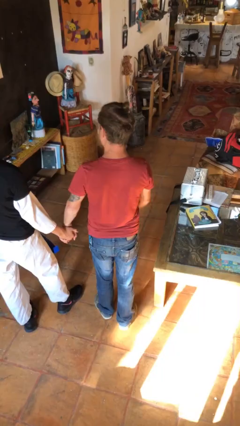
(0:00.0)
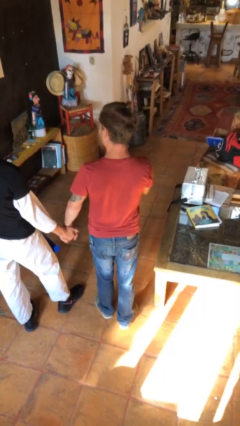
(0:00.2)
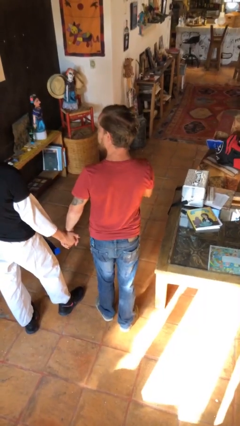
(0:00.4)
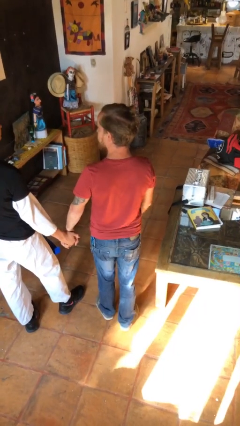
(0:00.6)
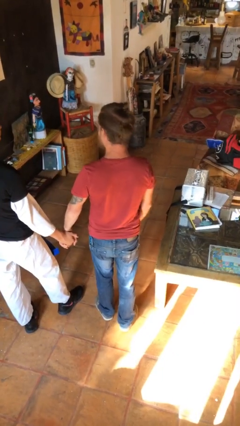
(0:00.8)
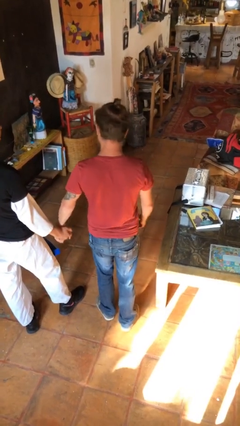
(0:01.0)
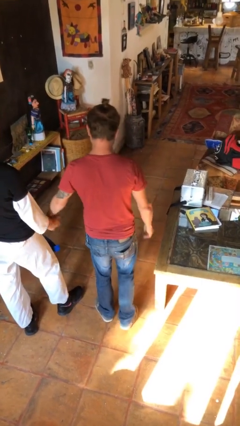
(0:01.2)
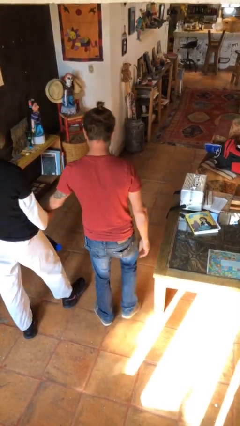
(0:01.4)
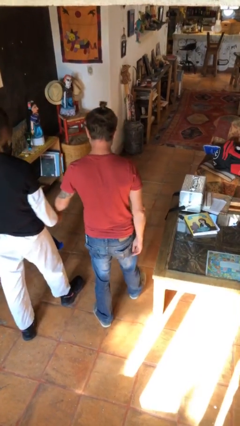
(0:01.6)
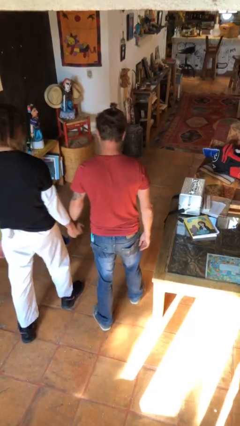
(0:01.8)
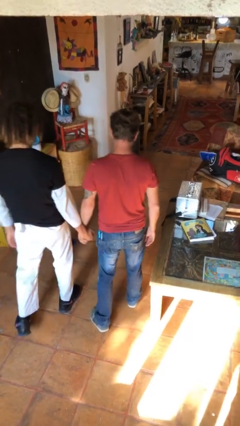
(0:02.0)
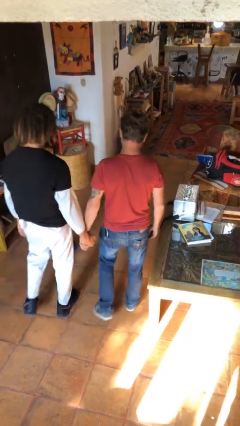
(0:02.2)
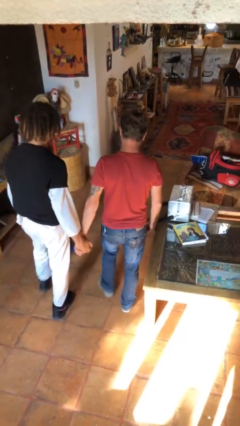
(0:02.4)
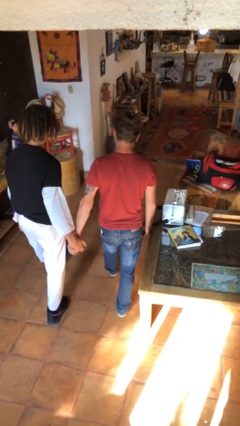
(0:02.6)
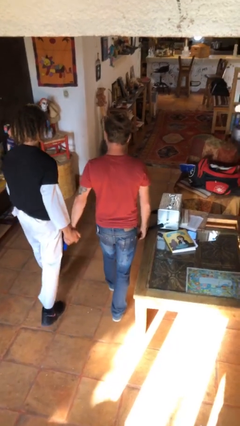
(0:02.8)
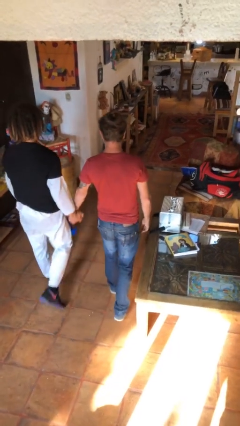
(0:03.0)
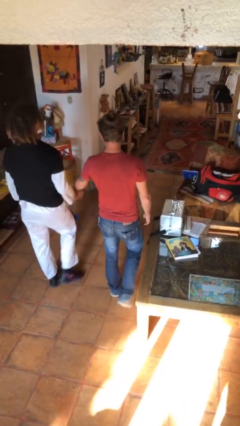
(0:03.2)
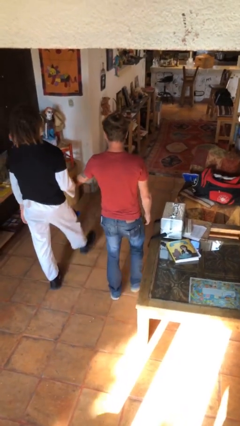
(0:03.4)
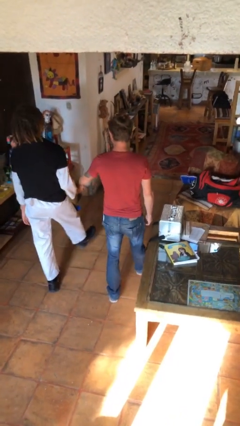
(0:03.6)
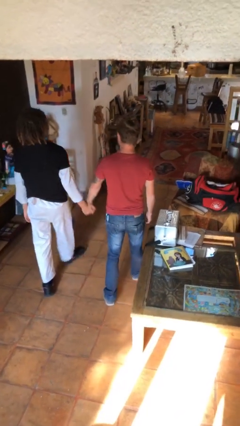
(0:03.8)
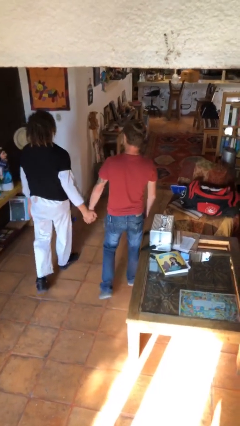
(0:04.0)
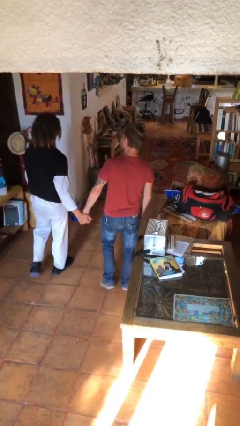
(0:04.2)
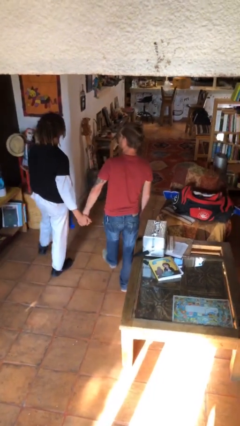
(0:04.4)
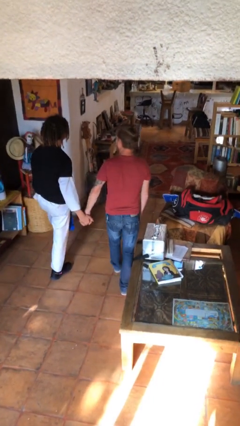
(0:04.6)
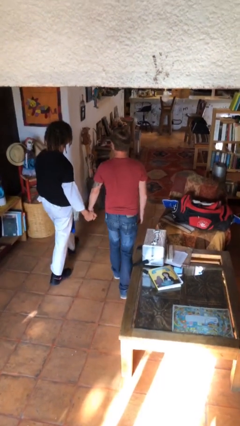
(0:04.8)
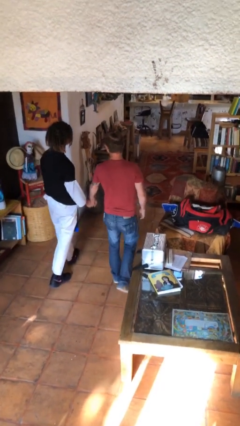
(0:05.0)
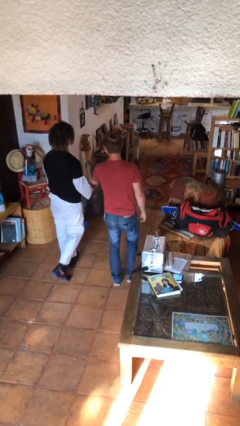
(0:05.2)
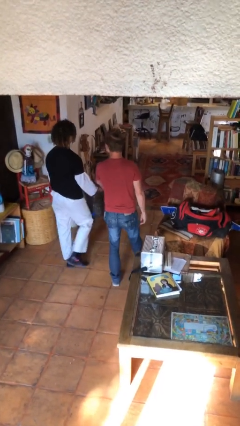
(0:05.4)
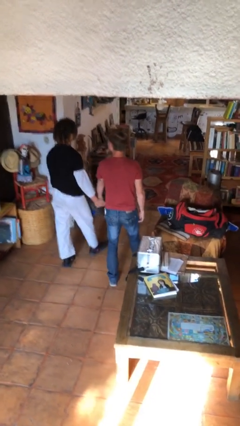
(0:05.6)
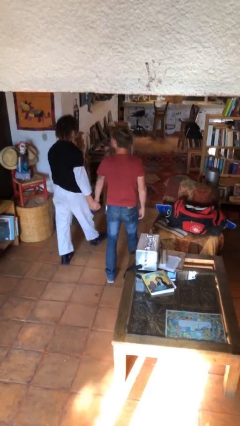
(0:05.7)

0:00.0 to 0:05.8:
person holds hand

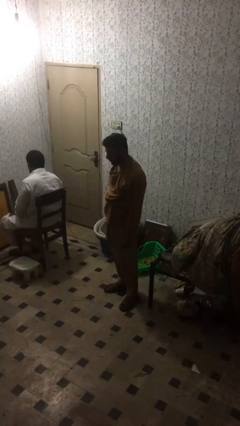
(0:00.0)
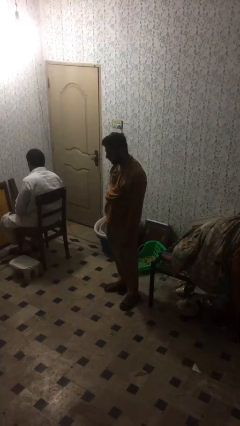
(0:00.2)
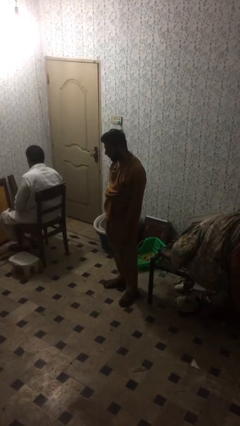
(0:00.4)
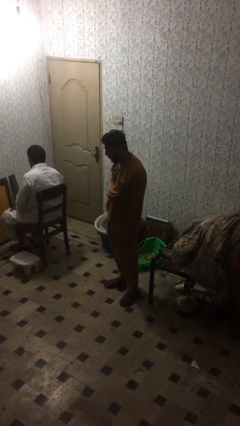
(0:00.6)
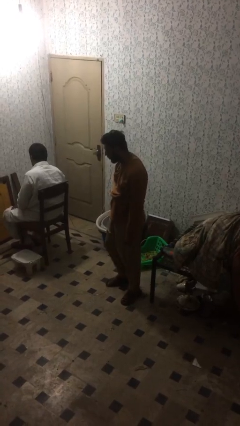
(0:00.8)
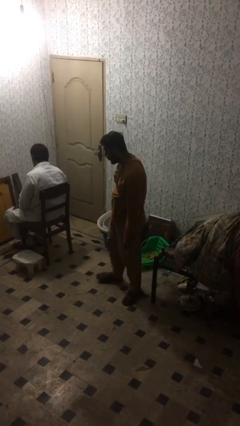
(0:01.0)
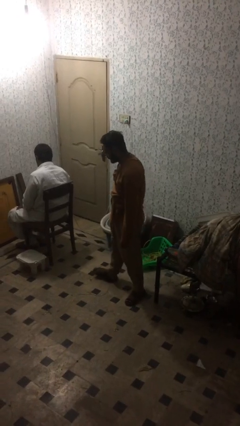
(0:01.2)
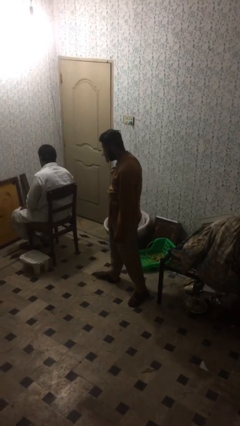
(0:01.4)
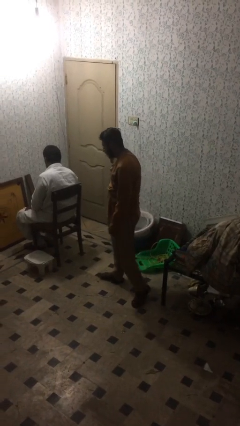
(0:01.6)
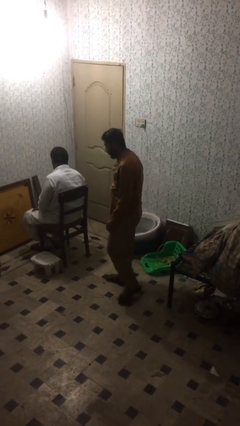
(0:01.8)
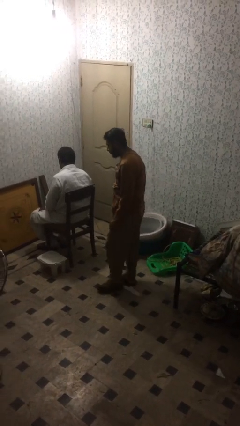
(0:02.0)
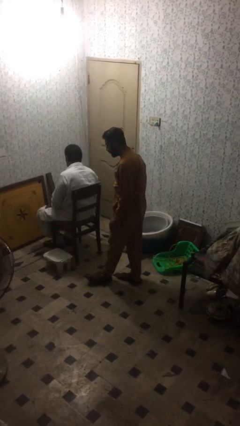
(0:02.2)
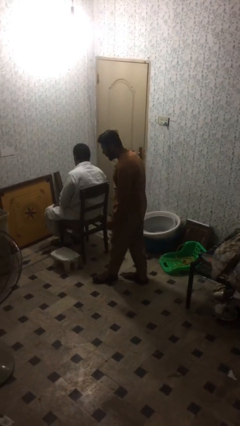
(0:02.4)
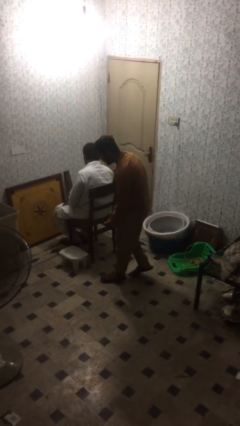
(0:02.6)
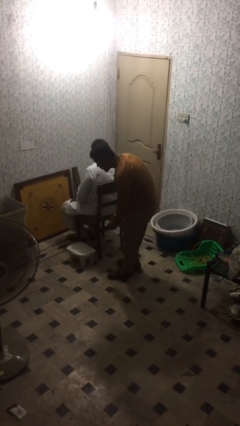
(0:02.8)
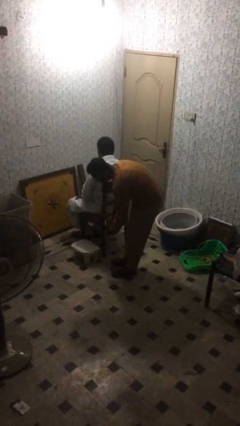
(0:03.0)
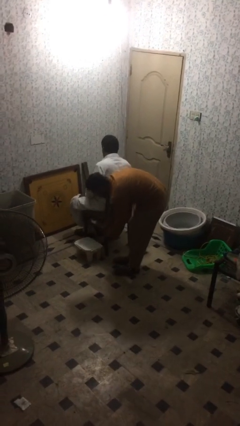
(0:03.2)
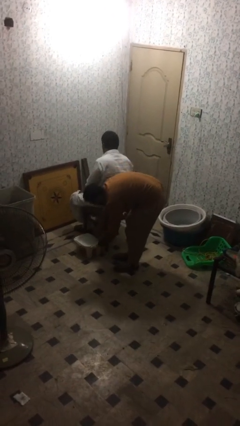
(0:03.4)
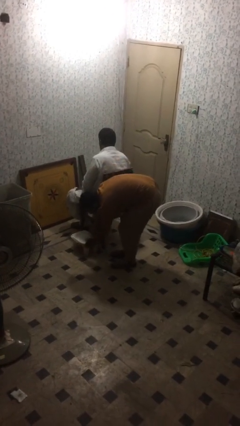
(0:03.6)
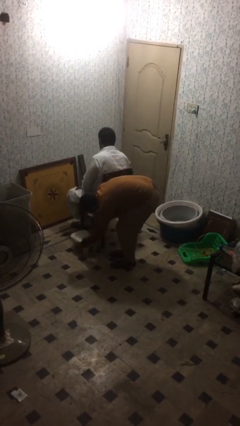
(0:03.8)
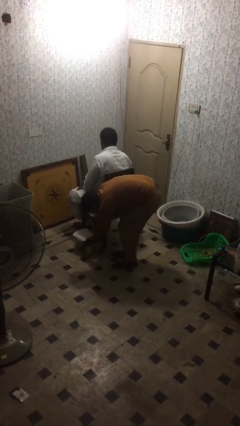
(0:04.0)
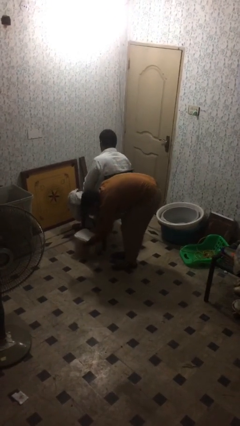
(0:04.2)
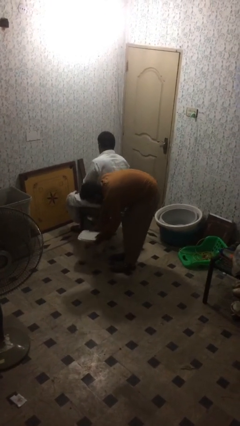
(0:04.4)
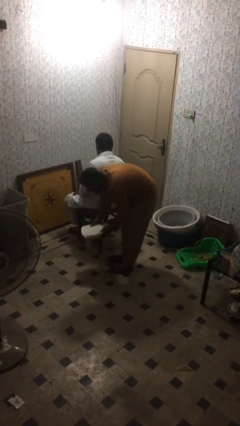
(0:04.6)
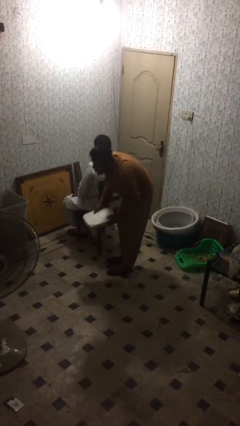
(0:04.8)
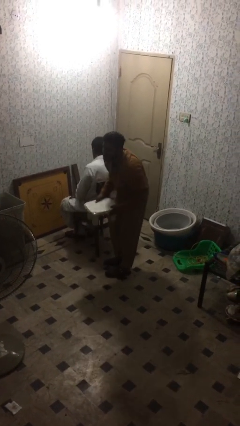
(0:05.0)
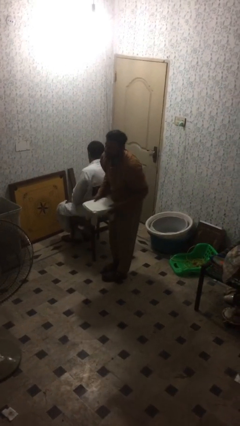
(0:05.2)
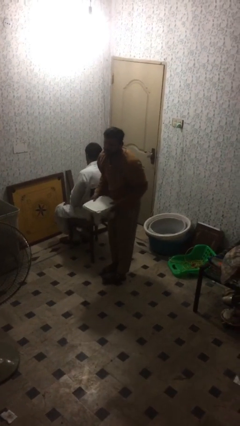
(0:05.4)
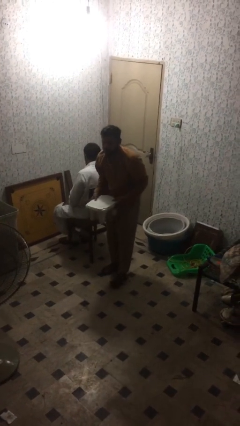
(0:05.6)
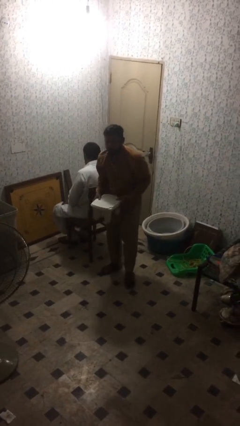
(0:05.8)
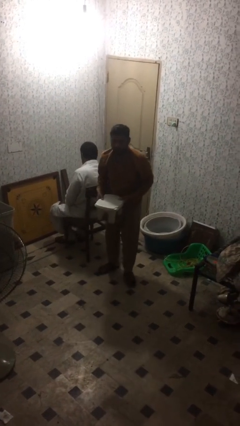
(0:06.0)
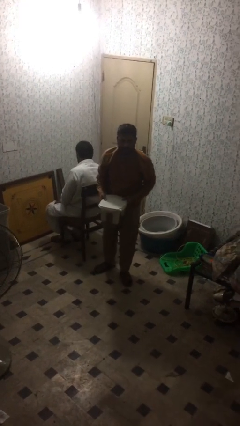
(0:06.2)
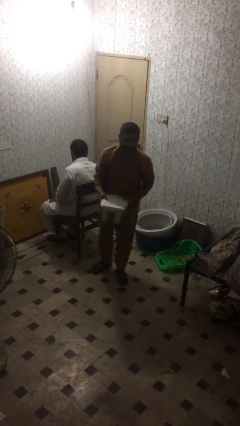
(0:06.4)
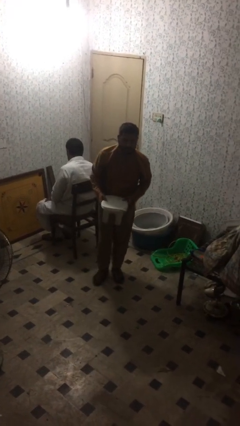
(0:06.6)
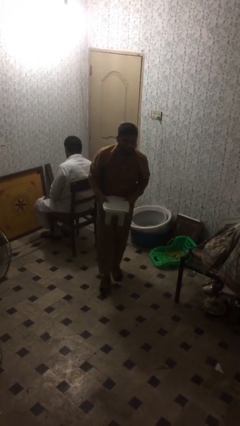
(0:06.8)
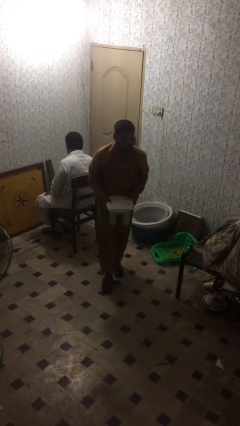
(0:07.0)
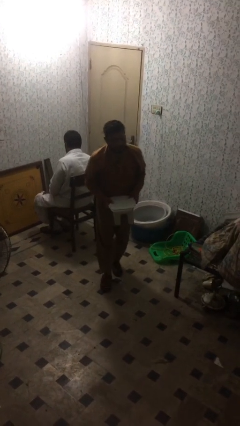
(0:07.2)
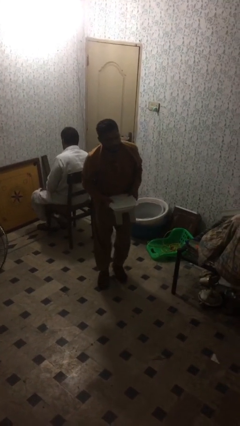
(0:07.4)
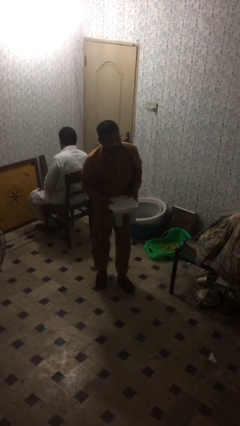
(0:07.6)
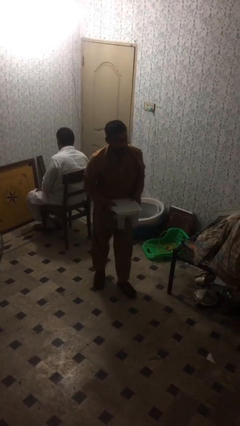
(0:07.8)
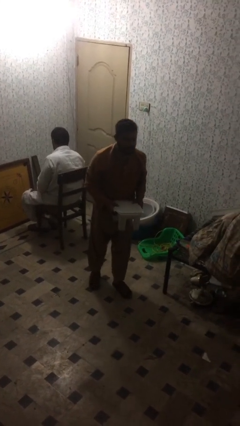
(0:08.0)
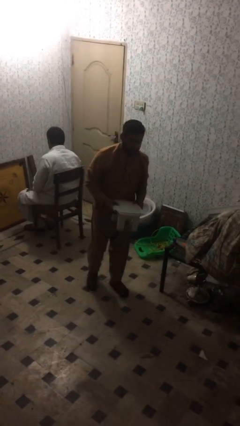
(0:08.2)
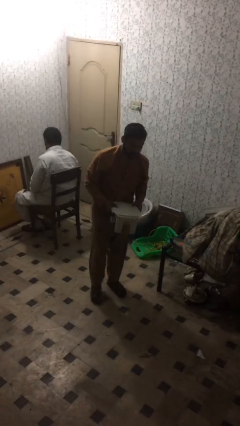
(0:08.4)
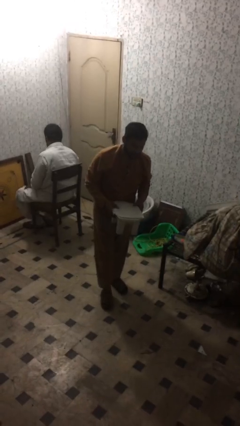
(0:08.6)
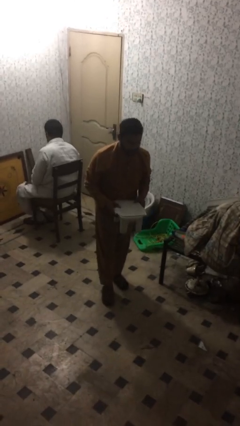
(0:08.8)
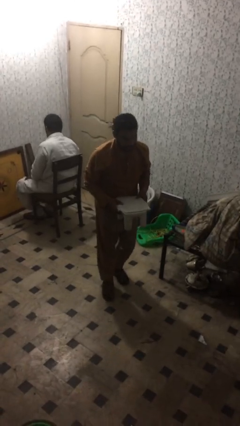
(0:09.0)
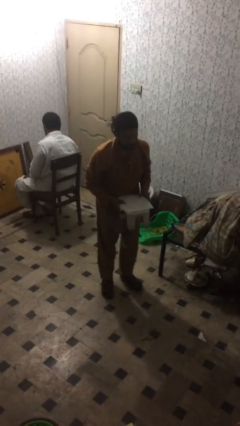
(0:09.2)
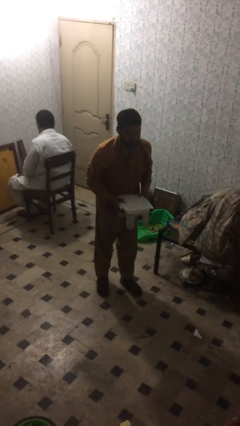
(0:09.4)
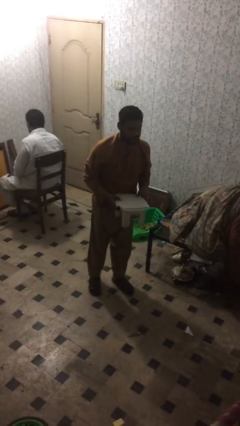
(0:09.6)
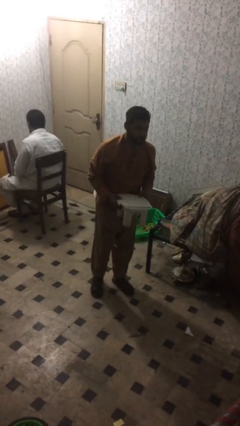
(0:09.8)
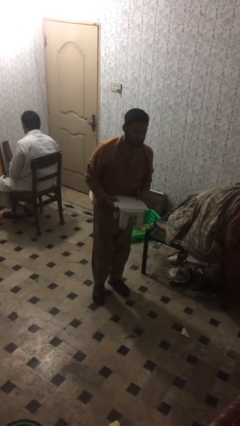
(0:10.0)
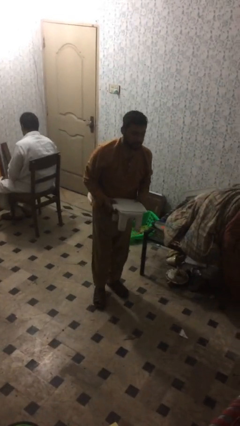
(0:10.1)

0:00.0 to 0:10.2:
person steals object from person

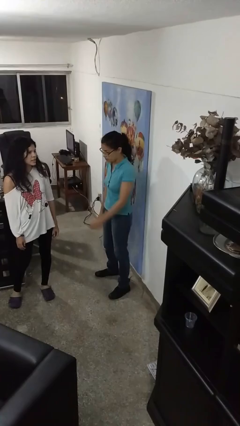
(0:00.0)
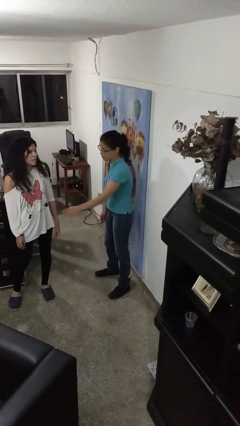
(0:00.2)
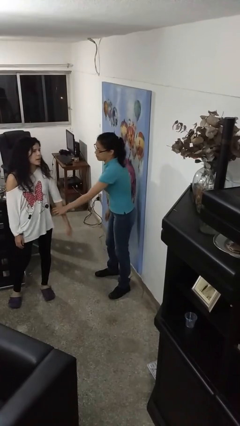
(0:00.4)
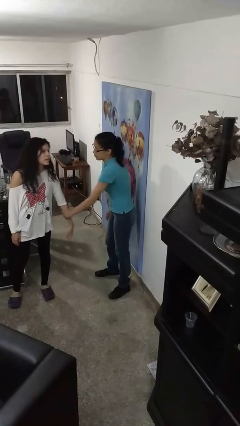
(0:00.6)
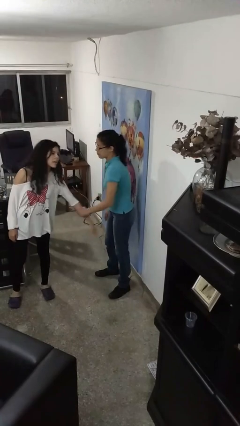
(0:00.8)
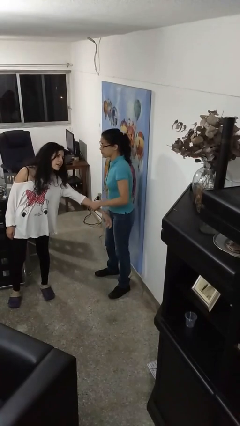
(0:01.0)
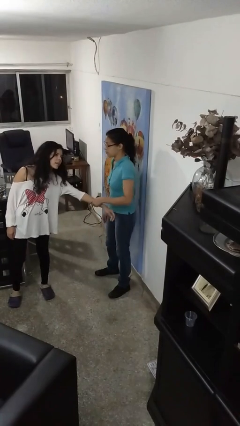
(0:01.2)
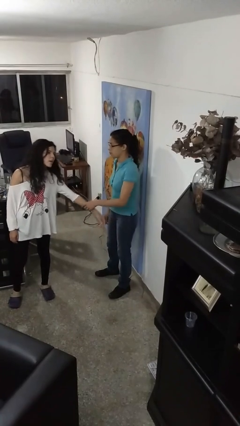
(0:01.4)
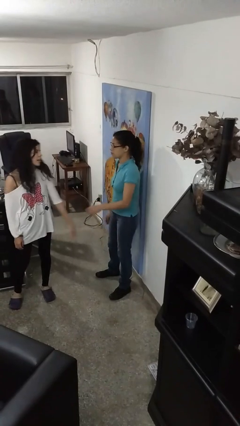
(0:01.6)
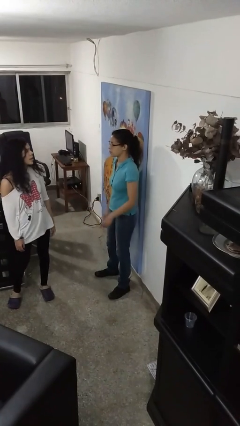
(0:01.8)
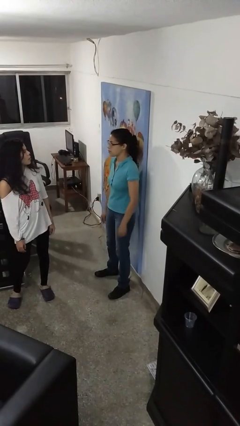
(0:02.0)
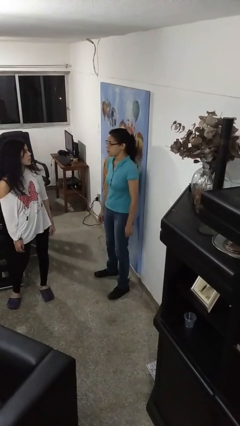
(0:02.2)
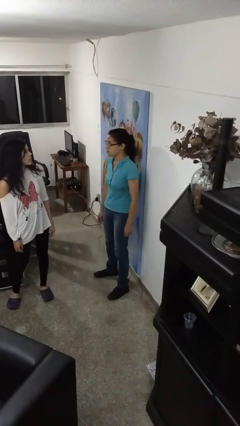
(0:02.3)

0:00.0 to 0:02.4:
person grabs person by forearm
